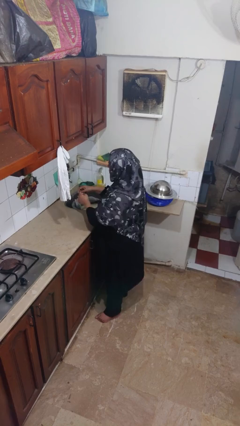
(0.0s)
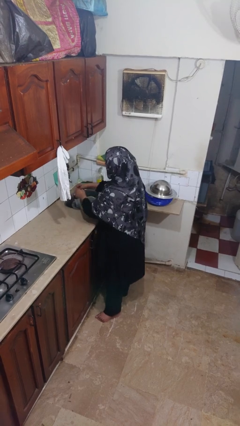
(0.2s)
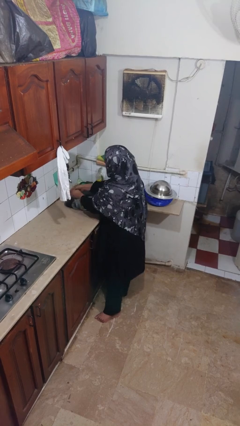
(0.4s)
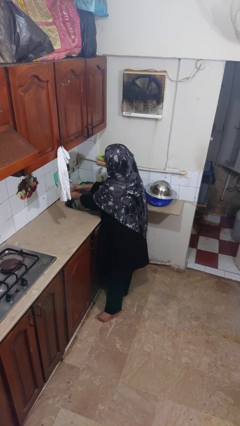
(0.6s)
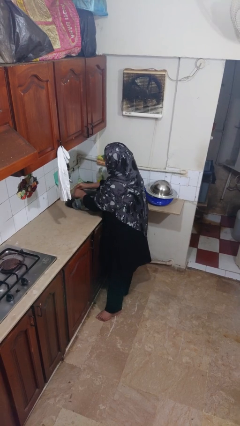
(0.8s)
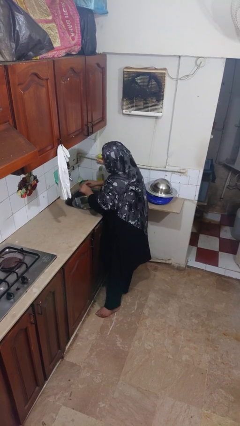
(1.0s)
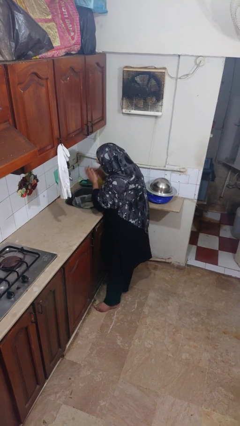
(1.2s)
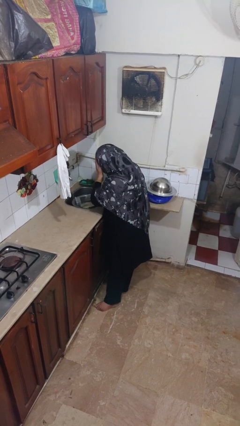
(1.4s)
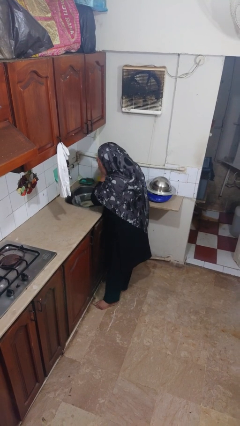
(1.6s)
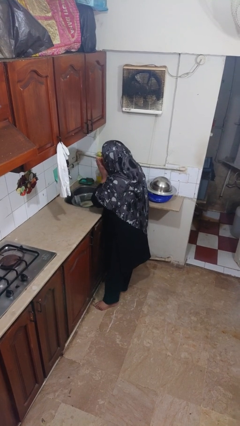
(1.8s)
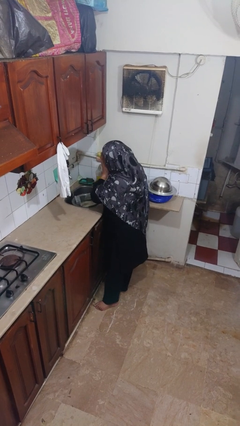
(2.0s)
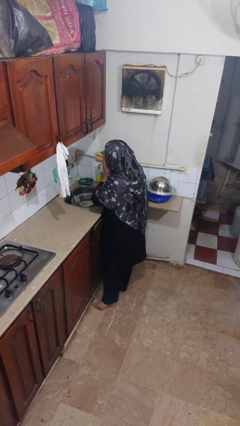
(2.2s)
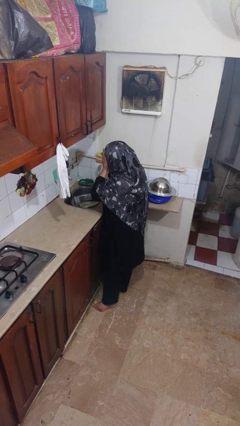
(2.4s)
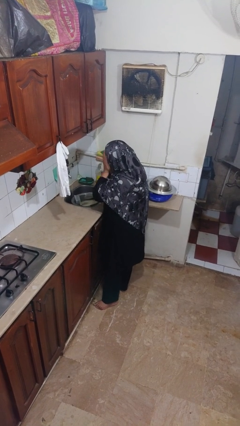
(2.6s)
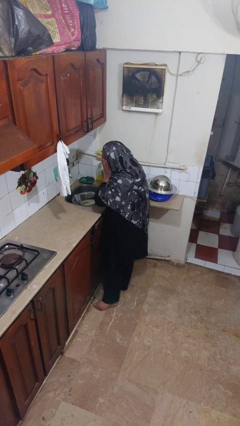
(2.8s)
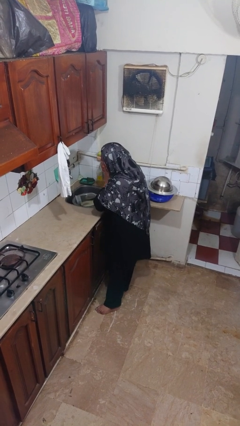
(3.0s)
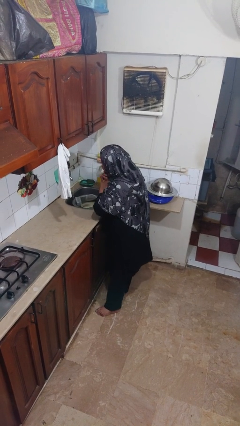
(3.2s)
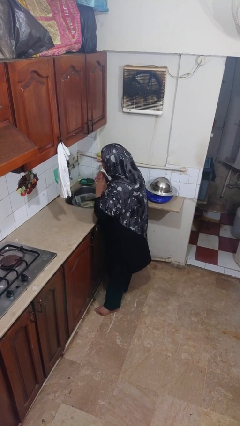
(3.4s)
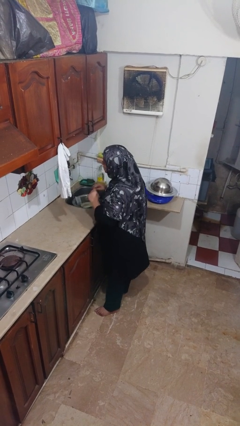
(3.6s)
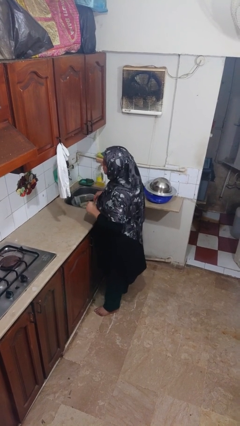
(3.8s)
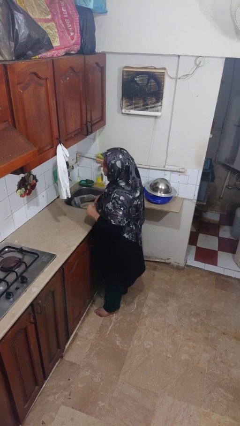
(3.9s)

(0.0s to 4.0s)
person washes face

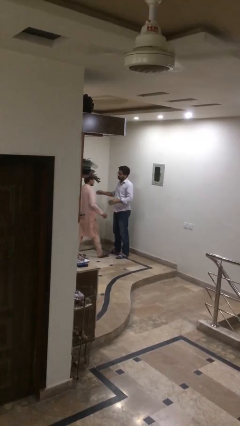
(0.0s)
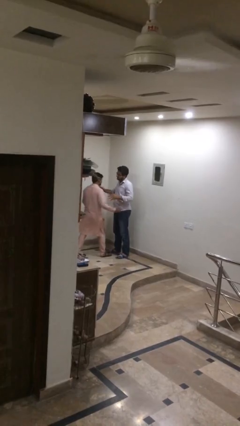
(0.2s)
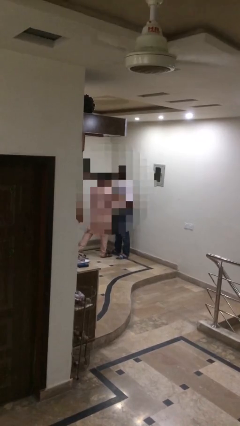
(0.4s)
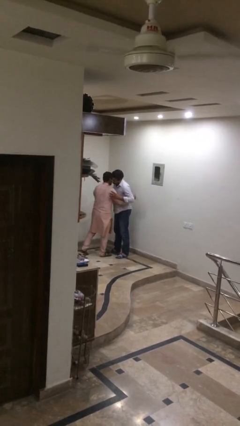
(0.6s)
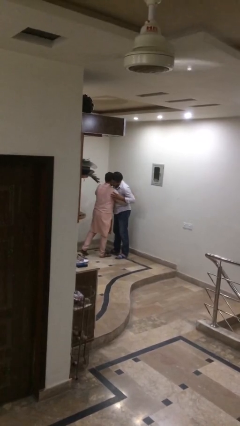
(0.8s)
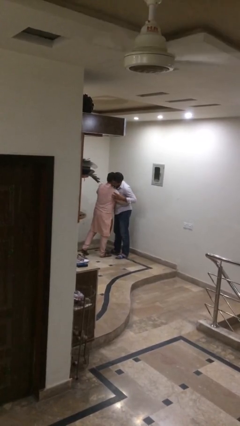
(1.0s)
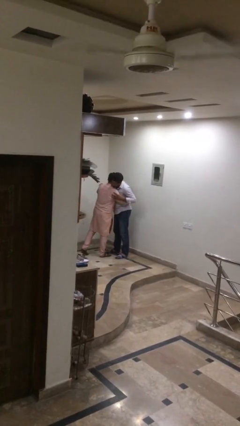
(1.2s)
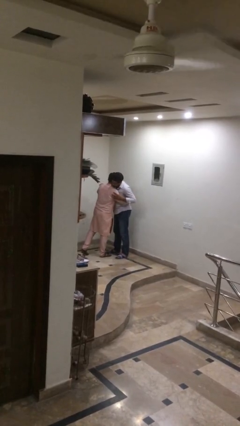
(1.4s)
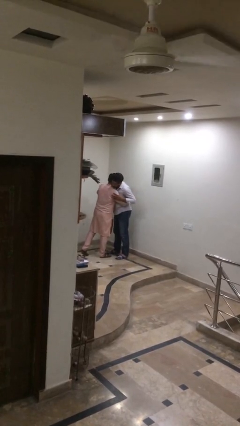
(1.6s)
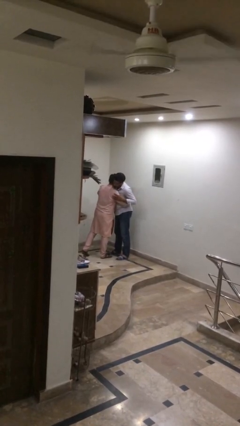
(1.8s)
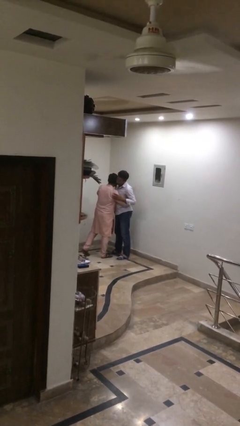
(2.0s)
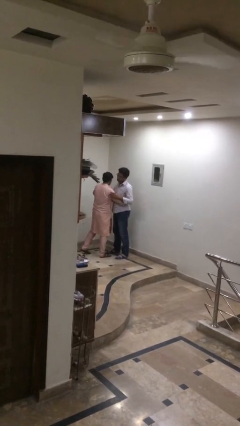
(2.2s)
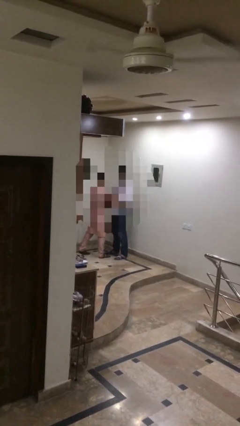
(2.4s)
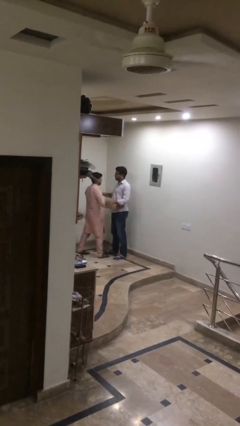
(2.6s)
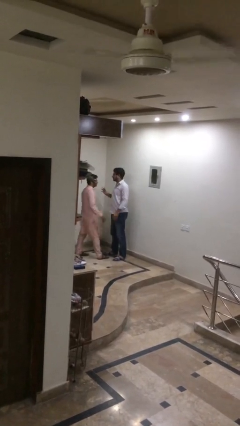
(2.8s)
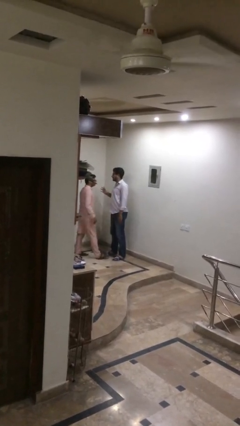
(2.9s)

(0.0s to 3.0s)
person embraces person

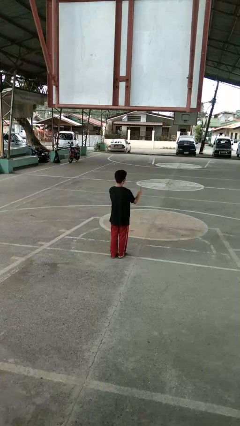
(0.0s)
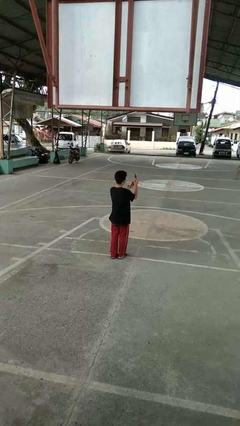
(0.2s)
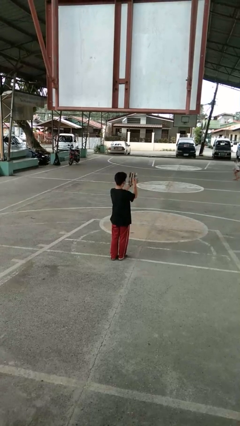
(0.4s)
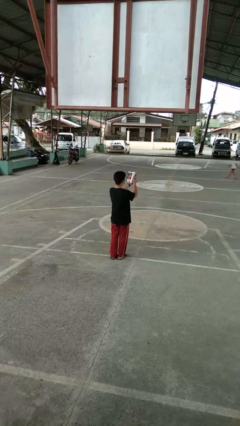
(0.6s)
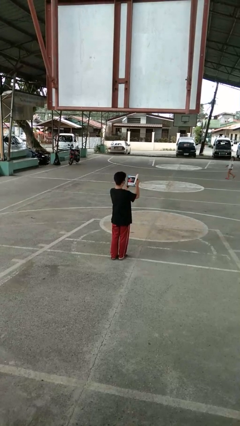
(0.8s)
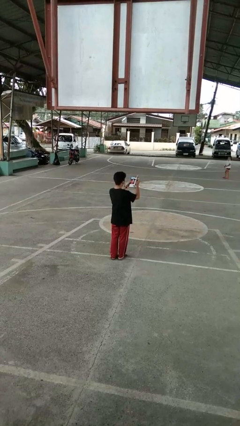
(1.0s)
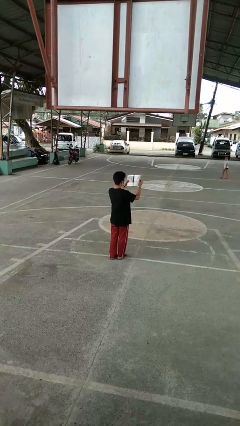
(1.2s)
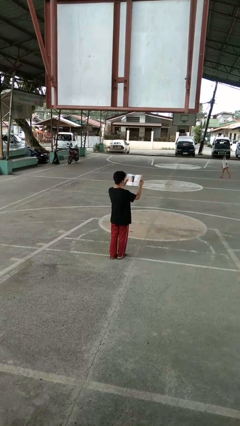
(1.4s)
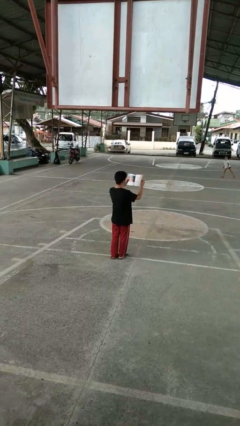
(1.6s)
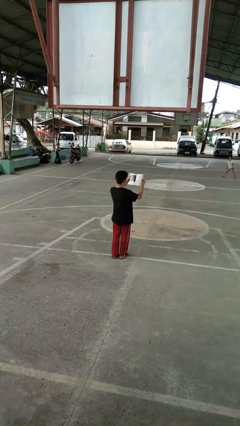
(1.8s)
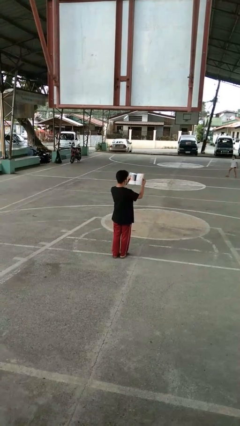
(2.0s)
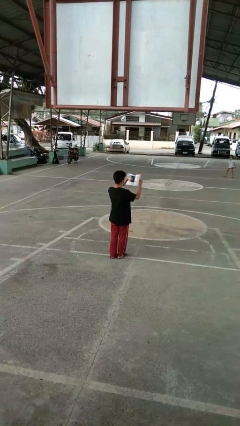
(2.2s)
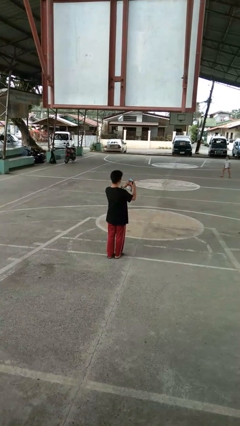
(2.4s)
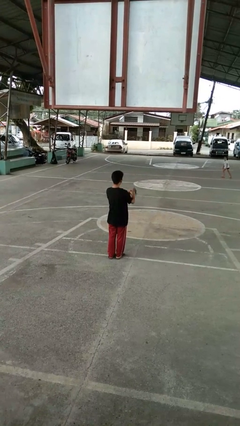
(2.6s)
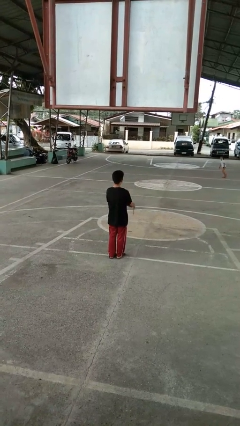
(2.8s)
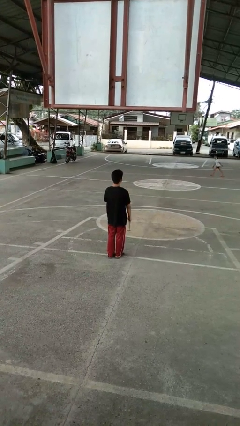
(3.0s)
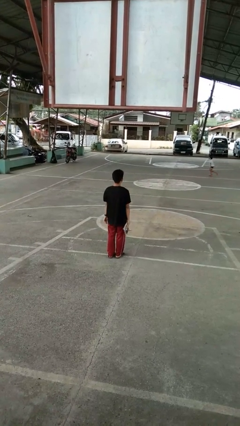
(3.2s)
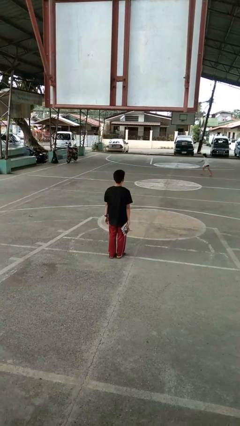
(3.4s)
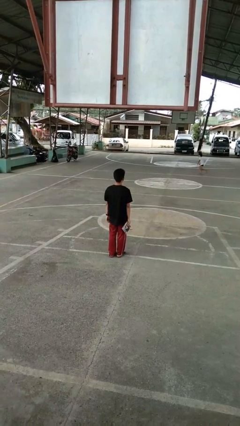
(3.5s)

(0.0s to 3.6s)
person reads magazine

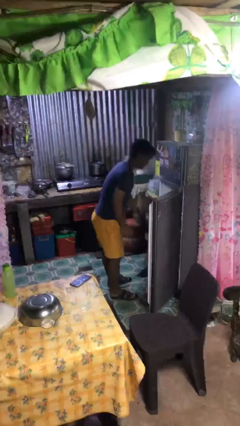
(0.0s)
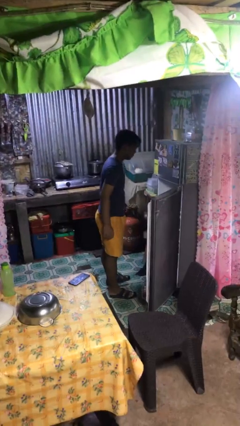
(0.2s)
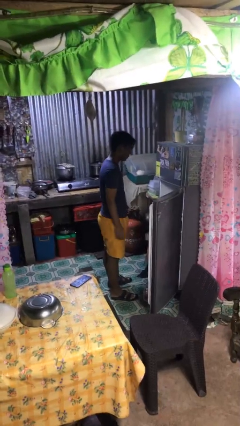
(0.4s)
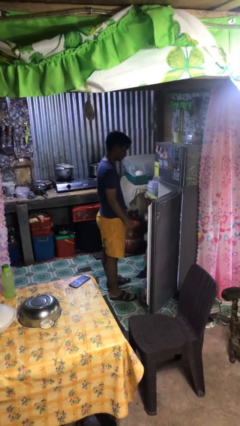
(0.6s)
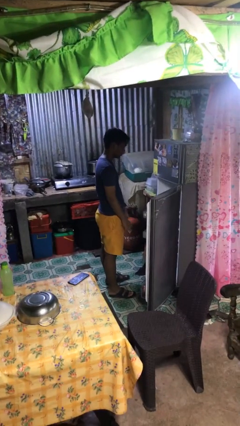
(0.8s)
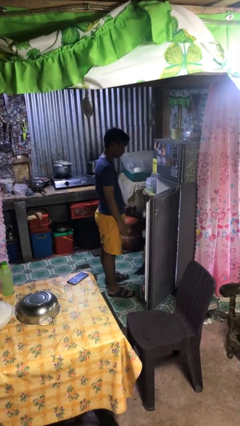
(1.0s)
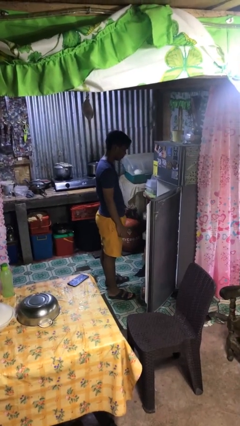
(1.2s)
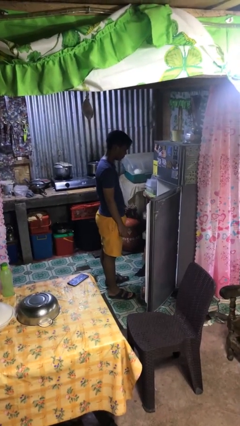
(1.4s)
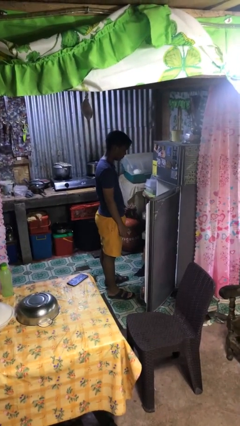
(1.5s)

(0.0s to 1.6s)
person puts object into refrigerator

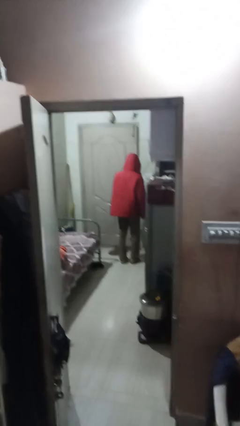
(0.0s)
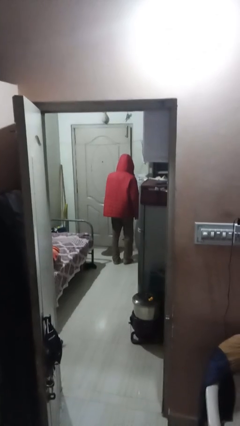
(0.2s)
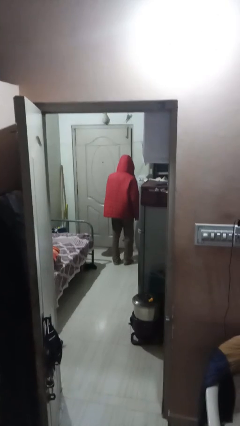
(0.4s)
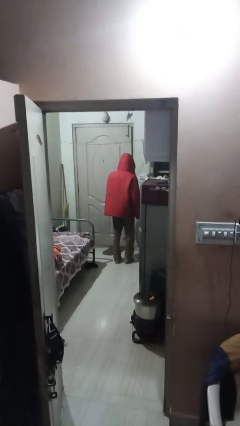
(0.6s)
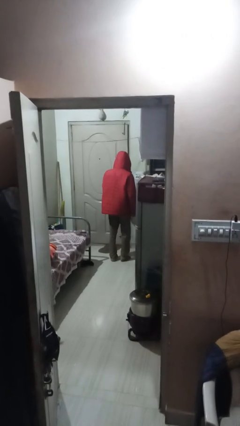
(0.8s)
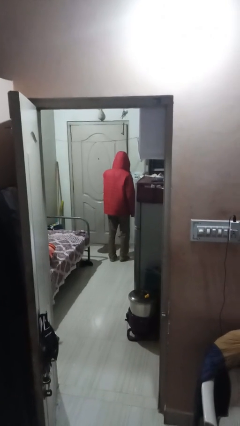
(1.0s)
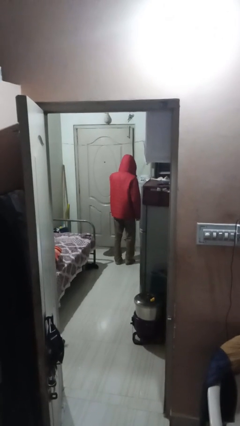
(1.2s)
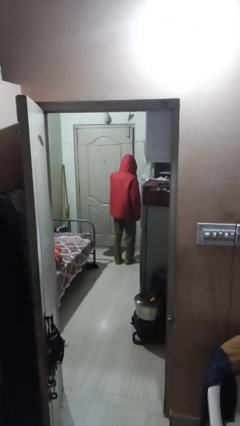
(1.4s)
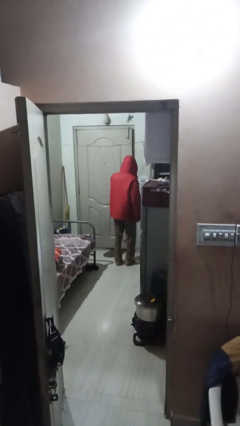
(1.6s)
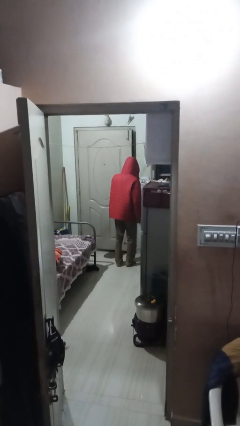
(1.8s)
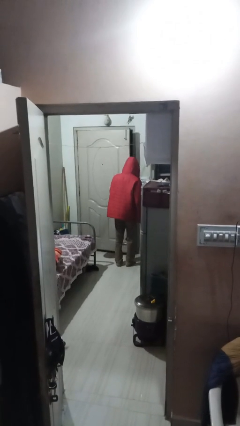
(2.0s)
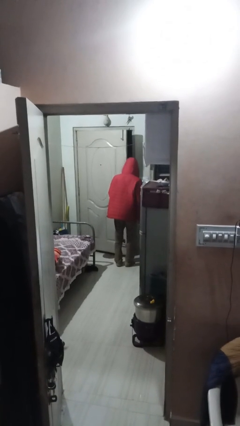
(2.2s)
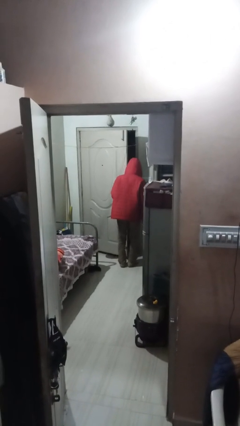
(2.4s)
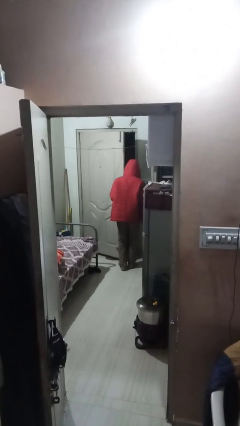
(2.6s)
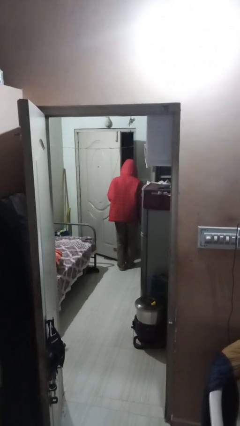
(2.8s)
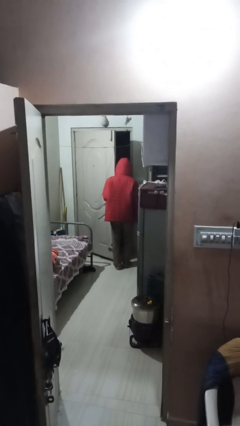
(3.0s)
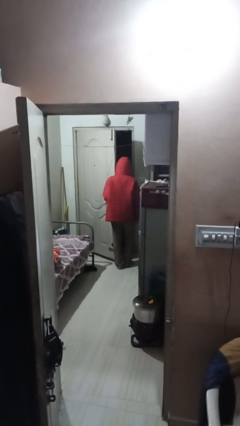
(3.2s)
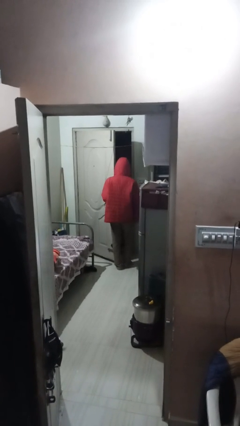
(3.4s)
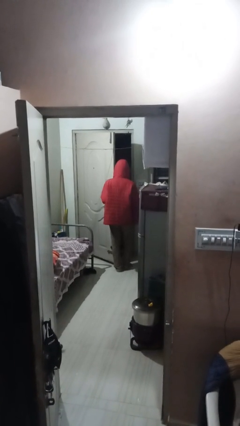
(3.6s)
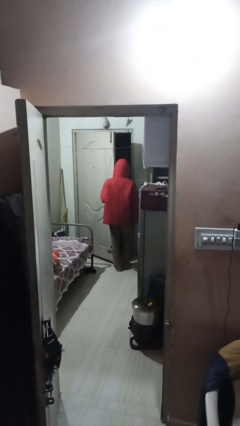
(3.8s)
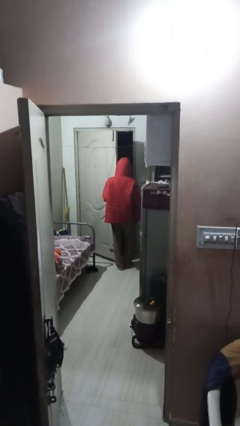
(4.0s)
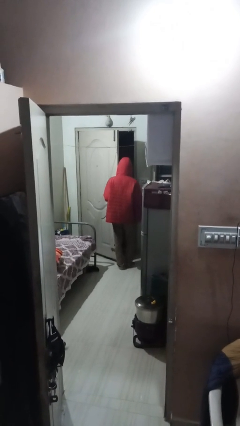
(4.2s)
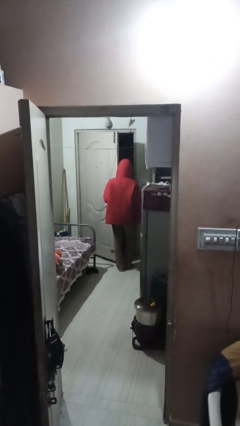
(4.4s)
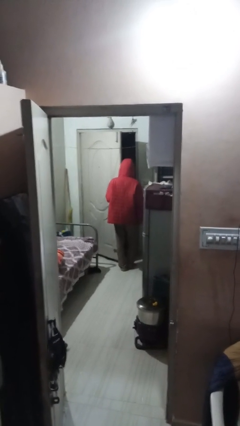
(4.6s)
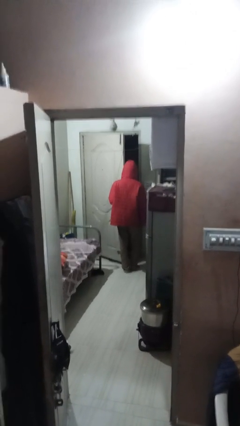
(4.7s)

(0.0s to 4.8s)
person opens facility door

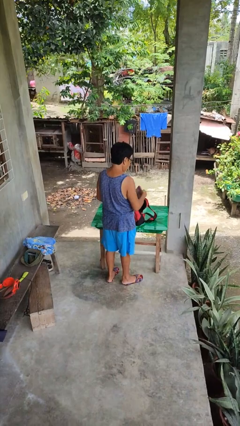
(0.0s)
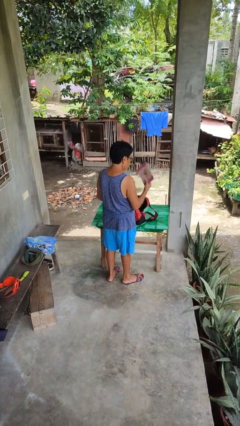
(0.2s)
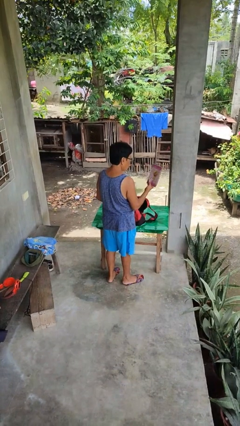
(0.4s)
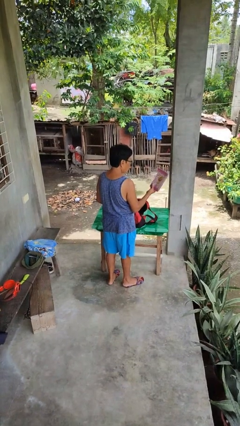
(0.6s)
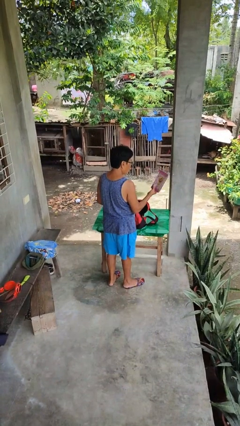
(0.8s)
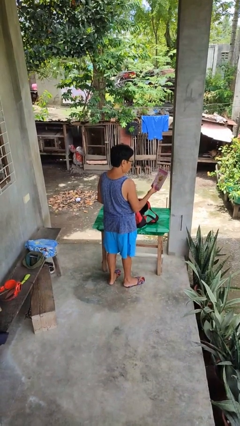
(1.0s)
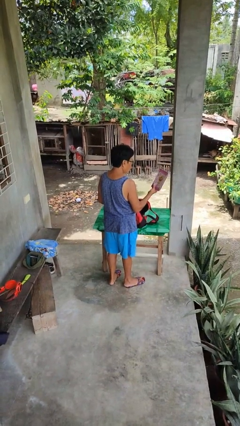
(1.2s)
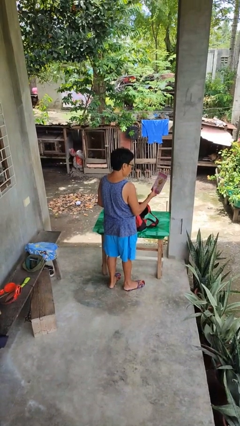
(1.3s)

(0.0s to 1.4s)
person takes object from backpack
